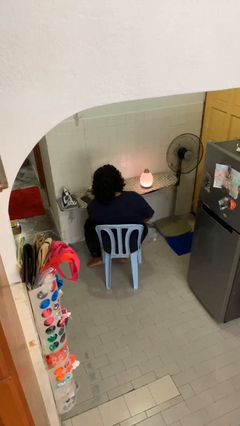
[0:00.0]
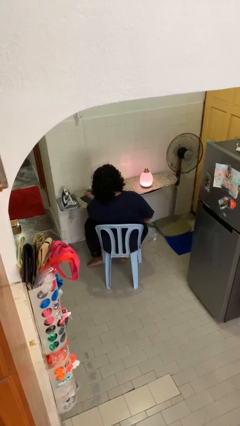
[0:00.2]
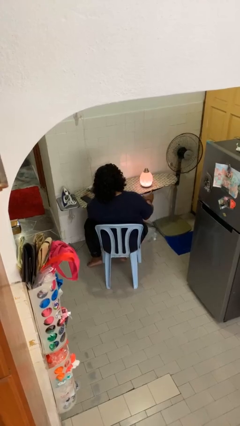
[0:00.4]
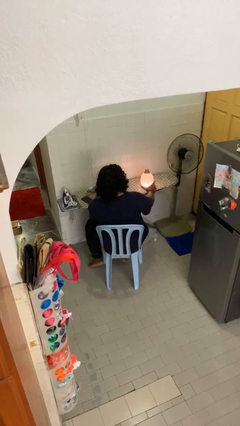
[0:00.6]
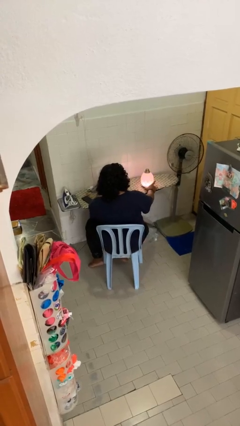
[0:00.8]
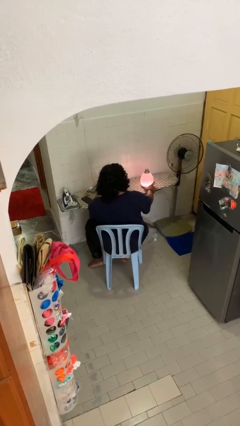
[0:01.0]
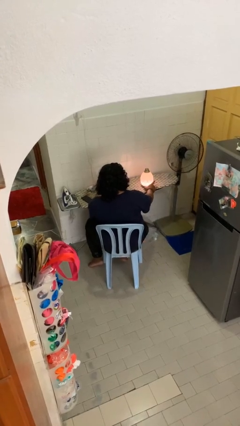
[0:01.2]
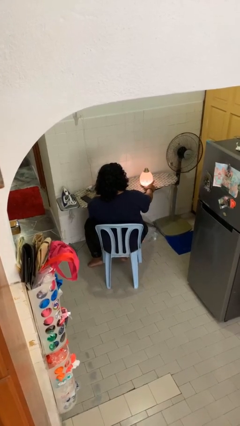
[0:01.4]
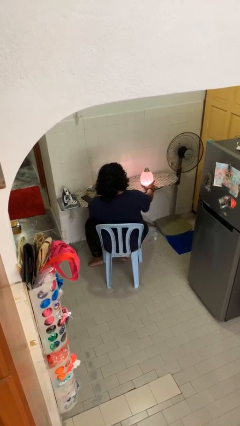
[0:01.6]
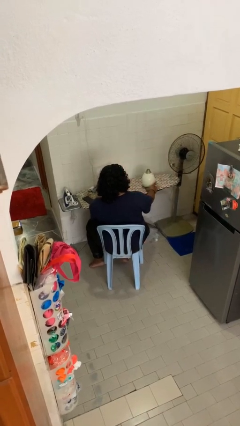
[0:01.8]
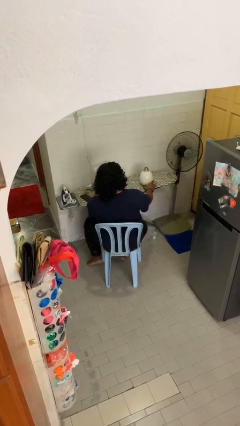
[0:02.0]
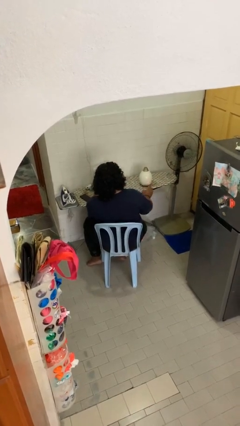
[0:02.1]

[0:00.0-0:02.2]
person turns off lamp

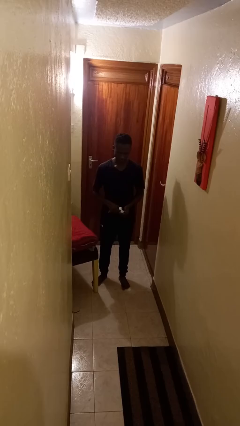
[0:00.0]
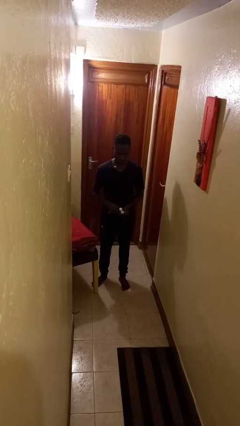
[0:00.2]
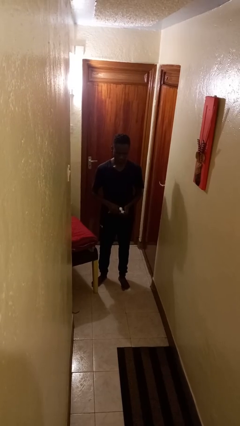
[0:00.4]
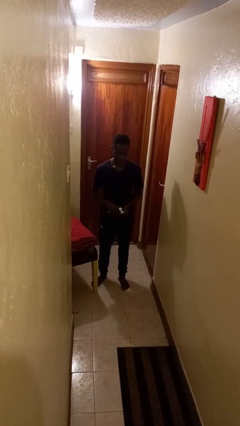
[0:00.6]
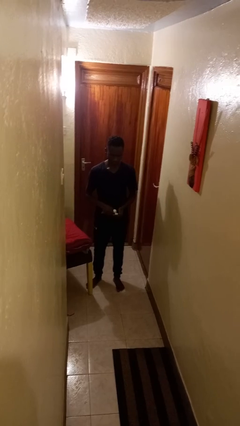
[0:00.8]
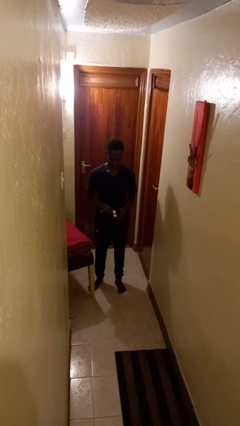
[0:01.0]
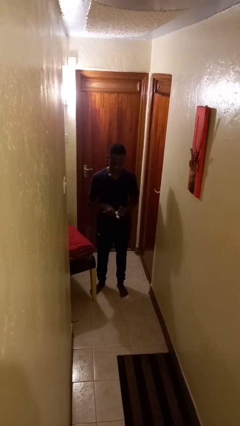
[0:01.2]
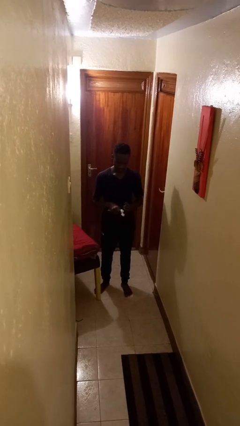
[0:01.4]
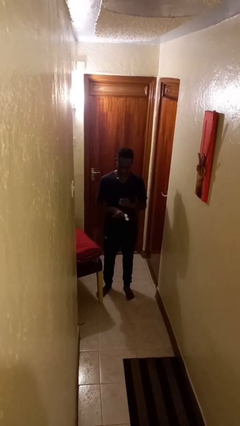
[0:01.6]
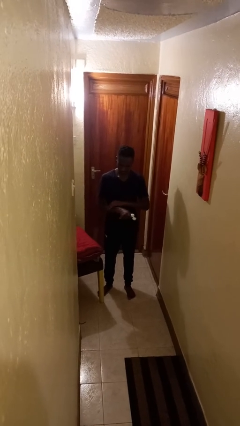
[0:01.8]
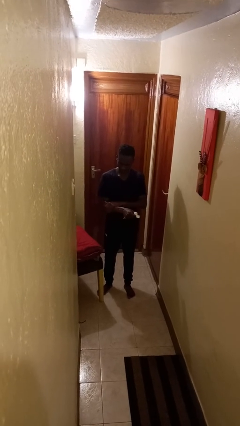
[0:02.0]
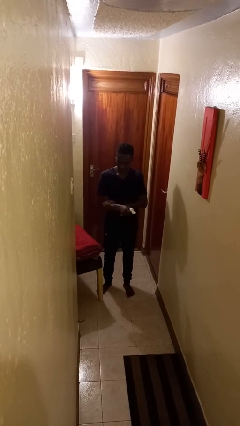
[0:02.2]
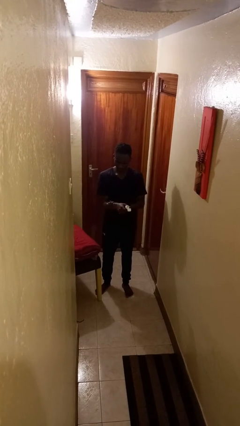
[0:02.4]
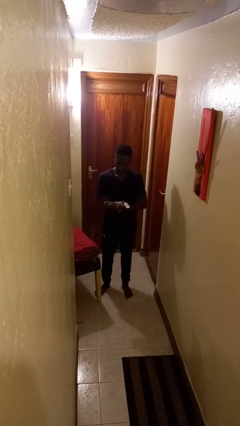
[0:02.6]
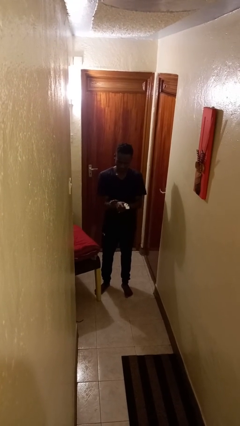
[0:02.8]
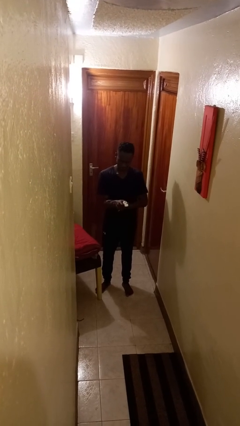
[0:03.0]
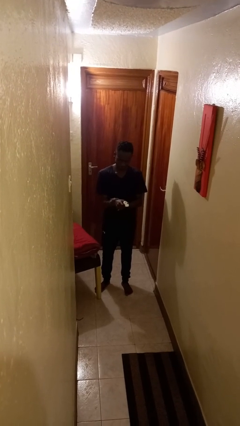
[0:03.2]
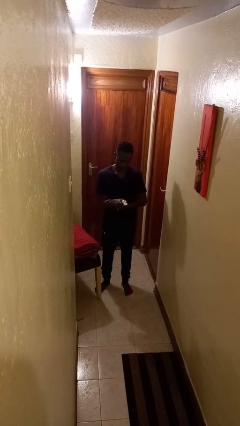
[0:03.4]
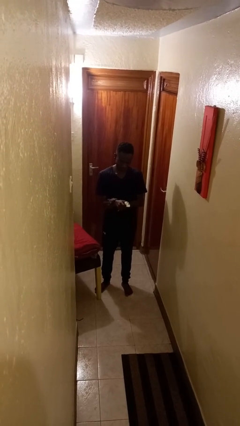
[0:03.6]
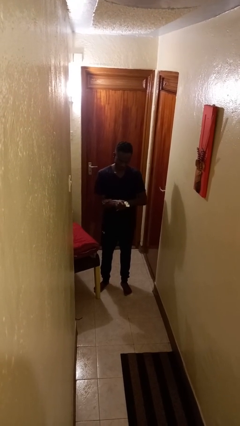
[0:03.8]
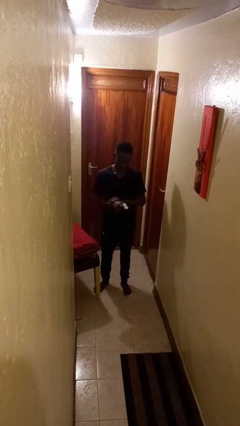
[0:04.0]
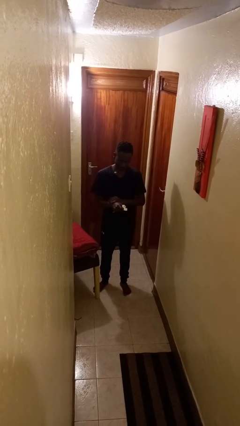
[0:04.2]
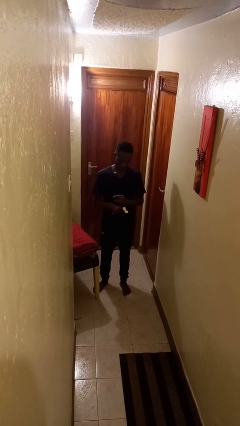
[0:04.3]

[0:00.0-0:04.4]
person applies sunscreen

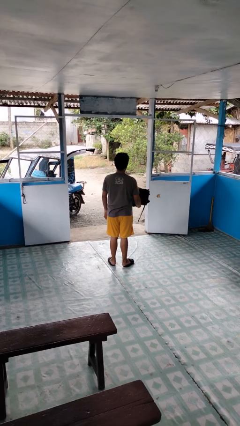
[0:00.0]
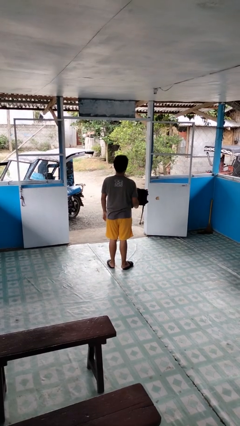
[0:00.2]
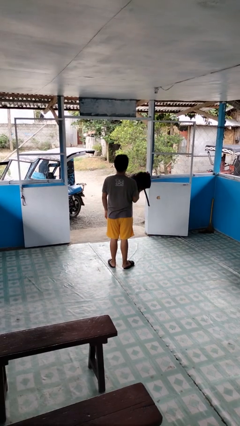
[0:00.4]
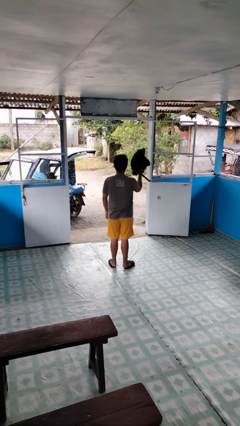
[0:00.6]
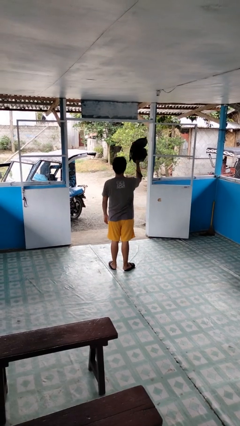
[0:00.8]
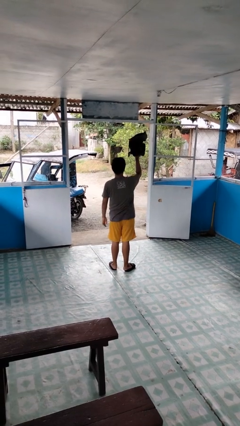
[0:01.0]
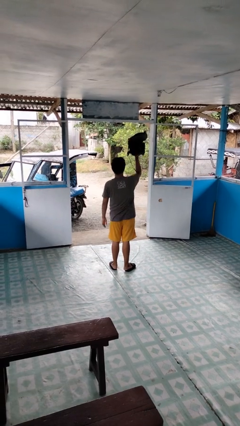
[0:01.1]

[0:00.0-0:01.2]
person holds object above head

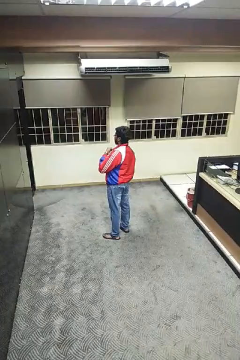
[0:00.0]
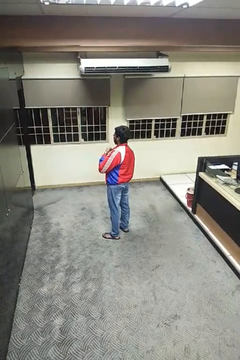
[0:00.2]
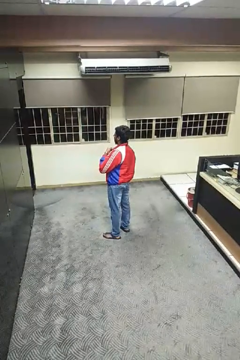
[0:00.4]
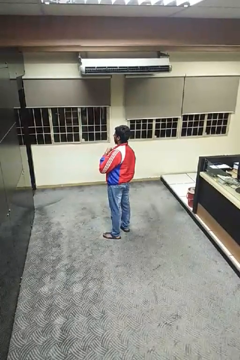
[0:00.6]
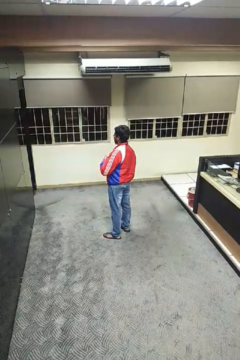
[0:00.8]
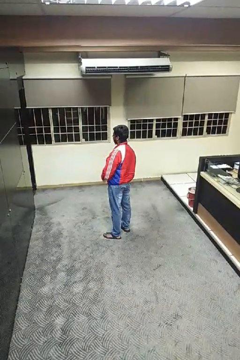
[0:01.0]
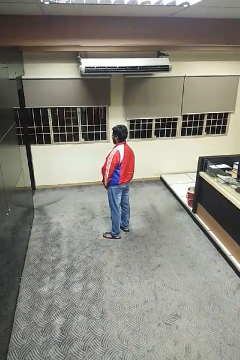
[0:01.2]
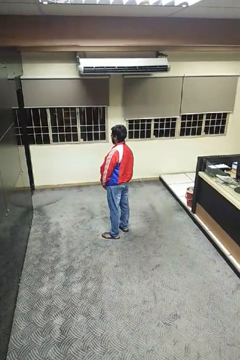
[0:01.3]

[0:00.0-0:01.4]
person unzips jacket

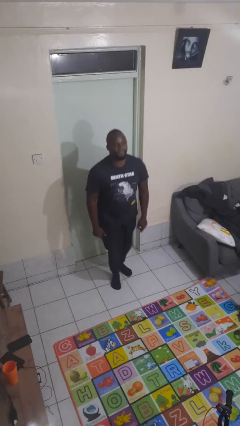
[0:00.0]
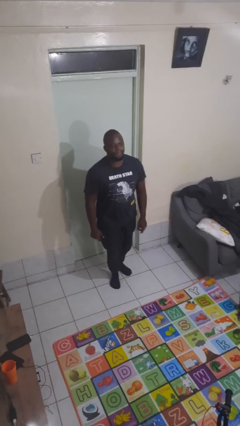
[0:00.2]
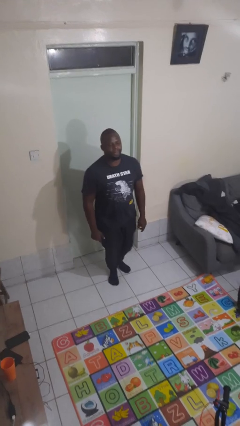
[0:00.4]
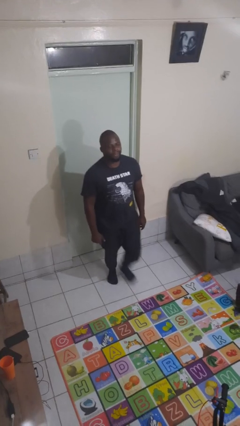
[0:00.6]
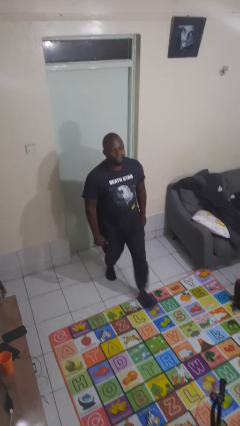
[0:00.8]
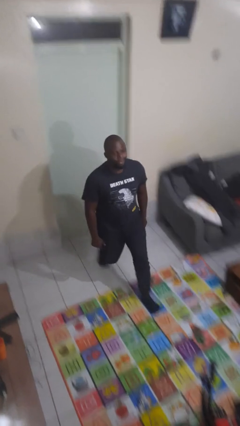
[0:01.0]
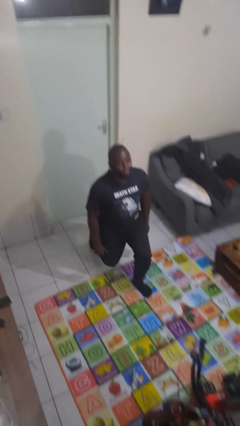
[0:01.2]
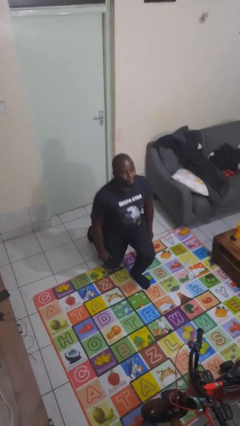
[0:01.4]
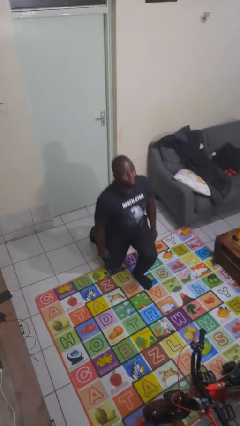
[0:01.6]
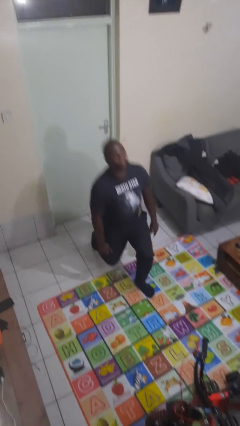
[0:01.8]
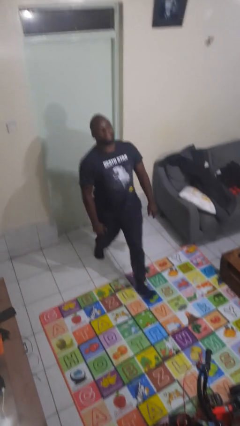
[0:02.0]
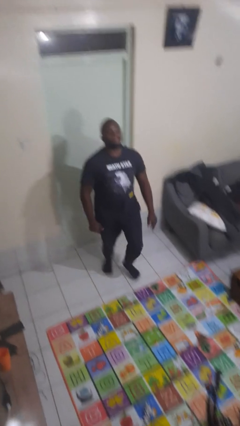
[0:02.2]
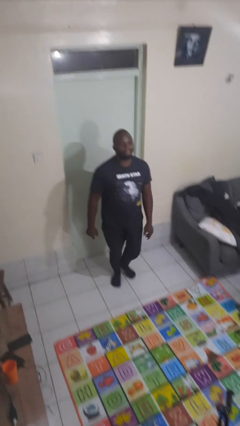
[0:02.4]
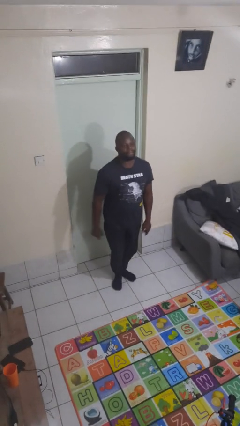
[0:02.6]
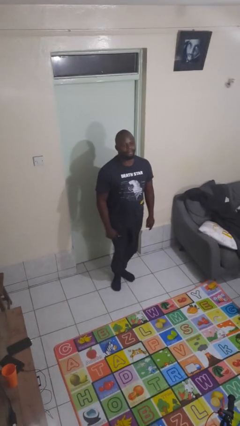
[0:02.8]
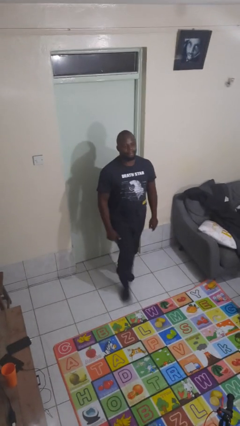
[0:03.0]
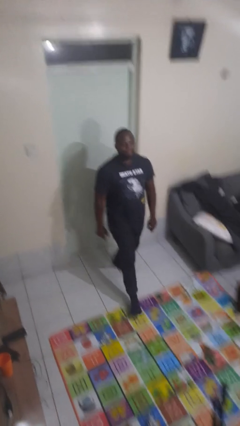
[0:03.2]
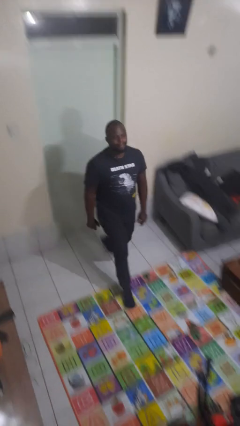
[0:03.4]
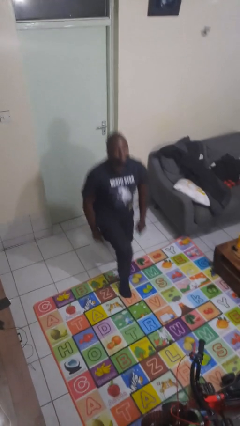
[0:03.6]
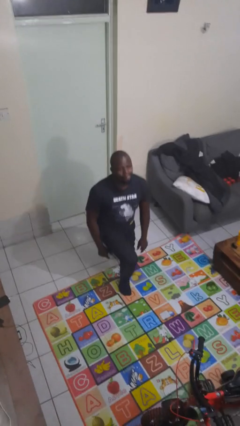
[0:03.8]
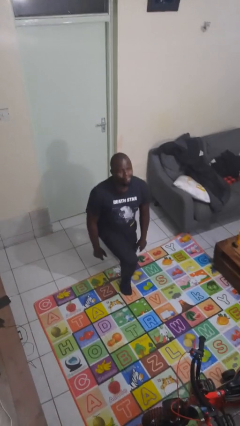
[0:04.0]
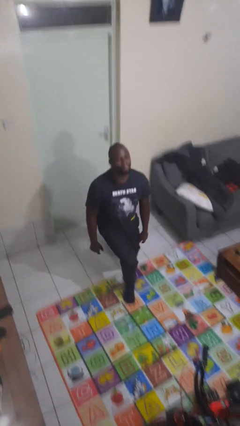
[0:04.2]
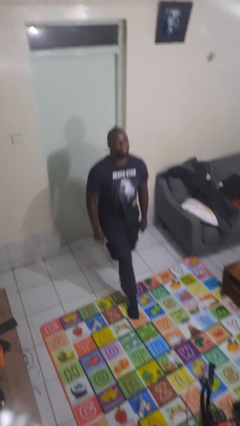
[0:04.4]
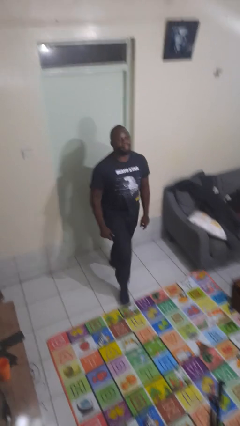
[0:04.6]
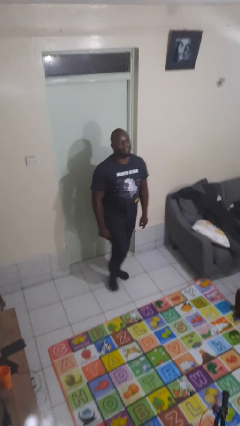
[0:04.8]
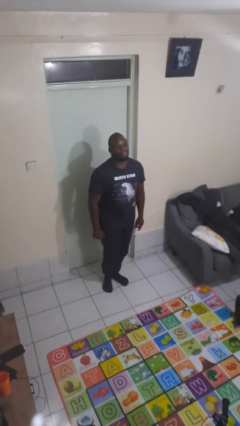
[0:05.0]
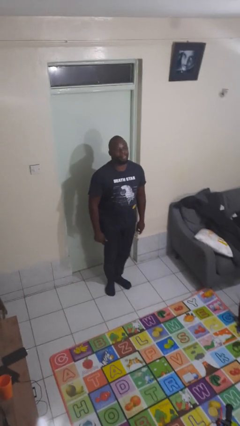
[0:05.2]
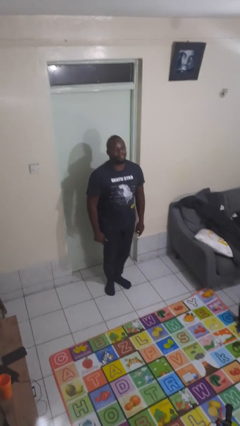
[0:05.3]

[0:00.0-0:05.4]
person exercises with lunges

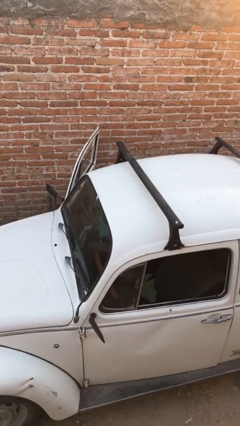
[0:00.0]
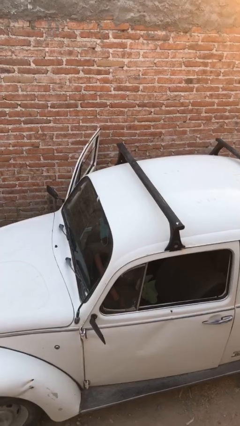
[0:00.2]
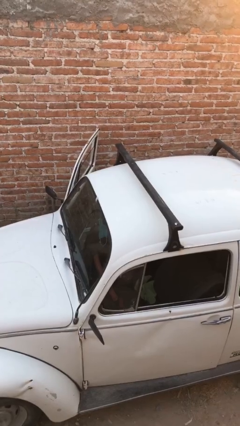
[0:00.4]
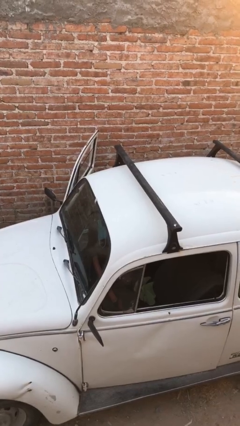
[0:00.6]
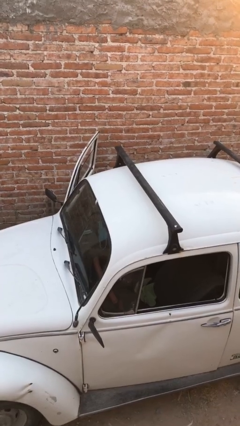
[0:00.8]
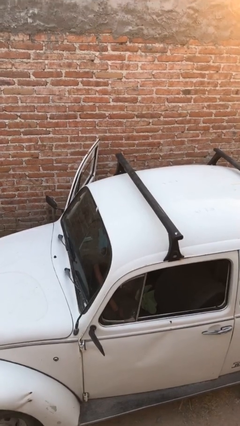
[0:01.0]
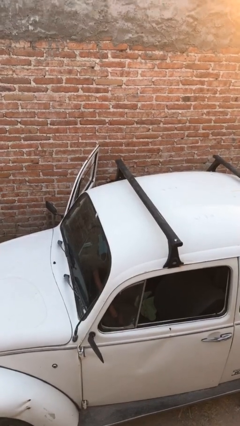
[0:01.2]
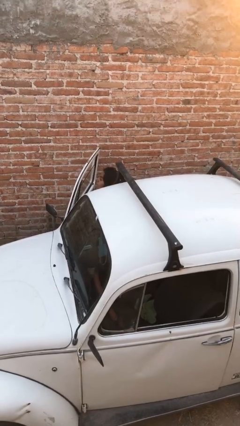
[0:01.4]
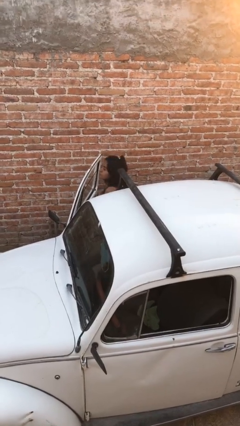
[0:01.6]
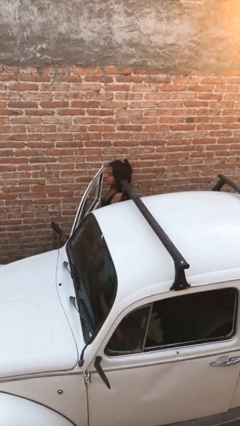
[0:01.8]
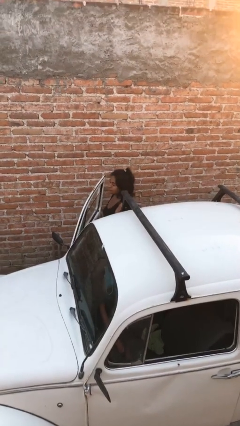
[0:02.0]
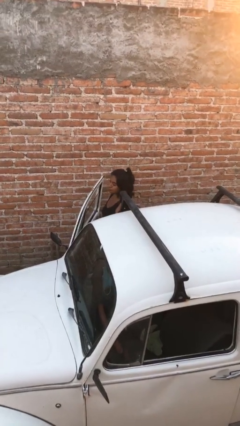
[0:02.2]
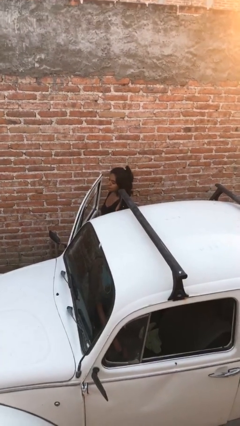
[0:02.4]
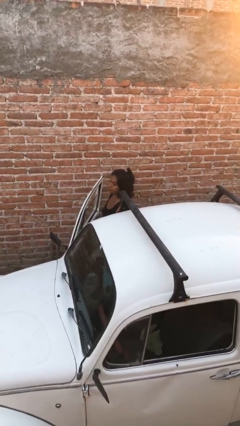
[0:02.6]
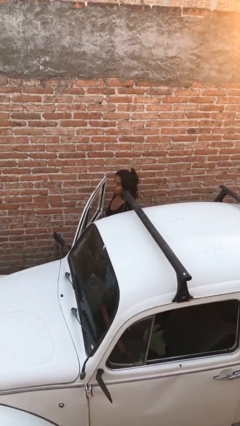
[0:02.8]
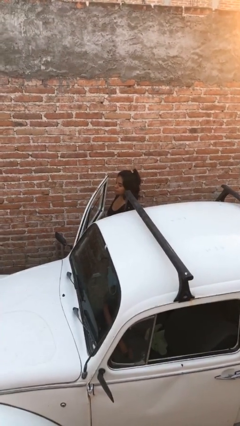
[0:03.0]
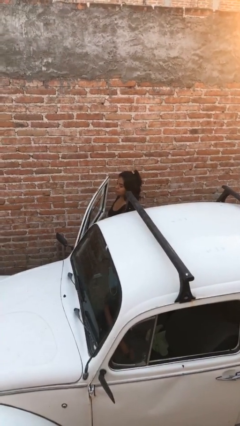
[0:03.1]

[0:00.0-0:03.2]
person exits car

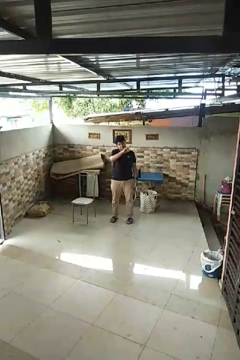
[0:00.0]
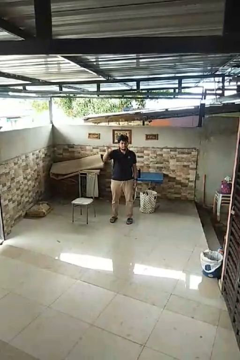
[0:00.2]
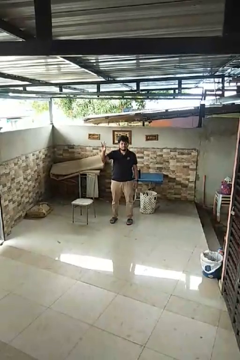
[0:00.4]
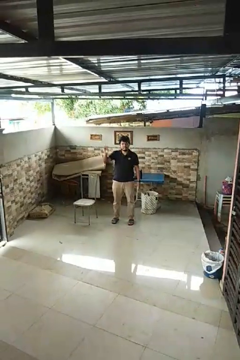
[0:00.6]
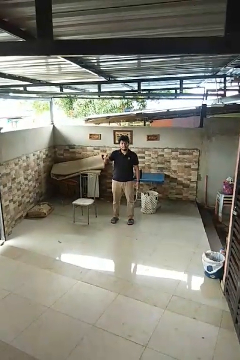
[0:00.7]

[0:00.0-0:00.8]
person gestures swipe right
